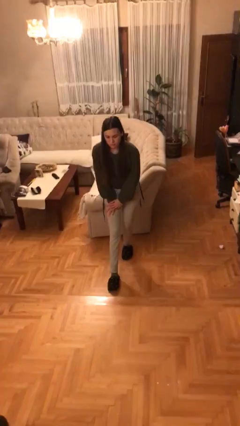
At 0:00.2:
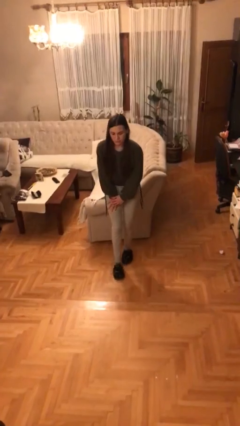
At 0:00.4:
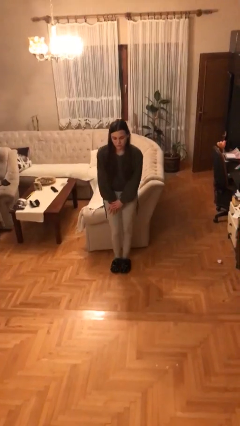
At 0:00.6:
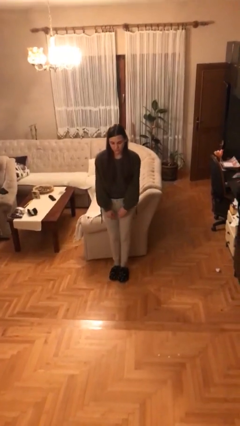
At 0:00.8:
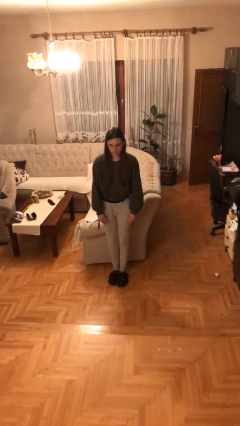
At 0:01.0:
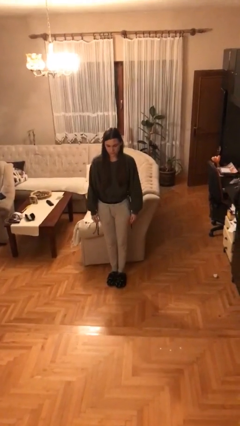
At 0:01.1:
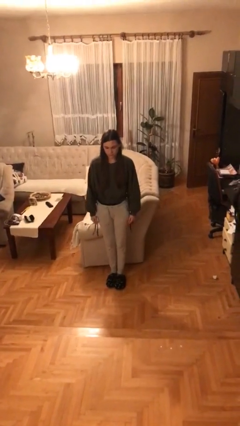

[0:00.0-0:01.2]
person stands up from floor

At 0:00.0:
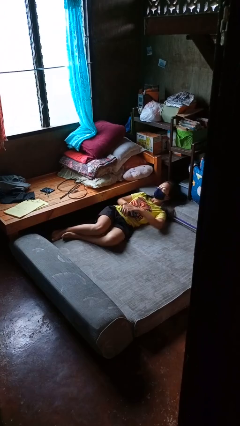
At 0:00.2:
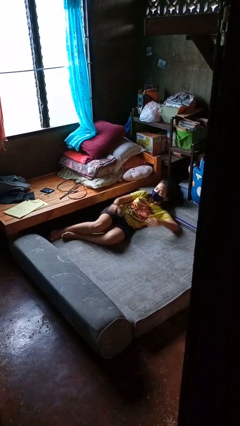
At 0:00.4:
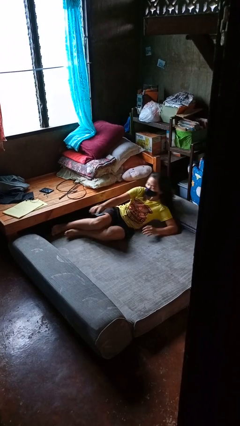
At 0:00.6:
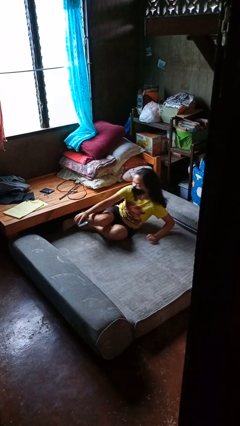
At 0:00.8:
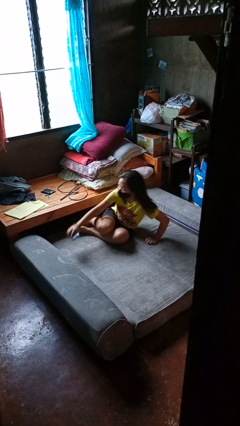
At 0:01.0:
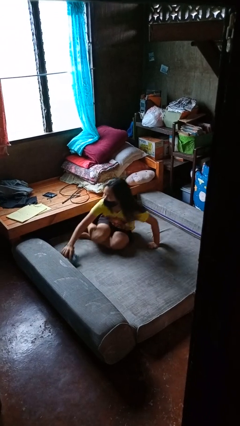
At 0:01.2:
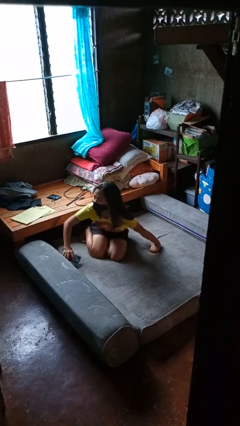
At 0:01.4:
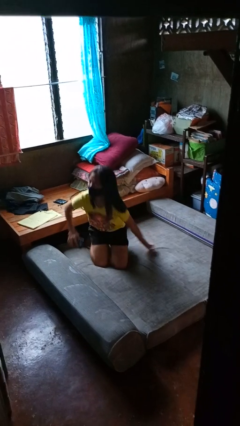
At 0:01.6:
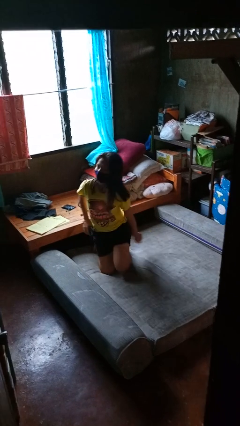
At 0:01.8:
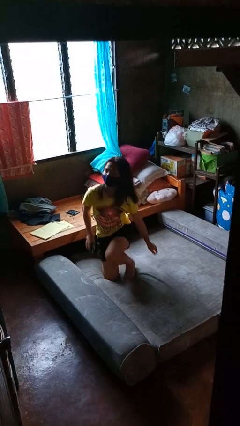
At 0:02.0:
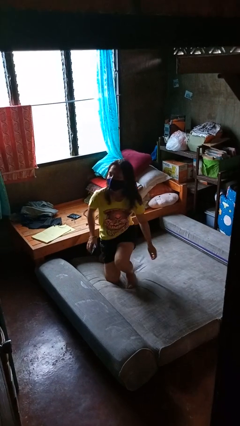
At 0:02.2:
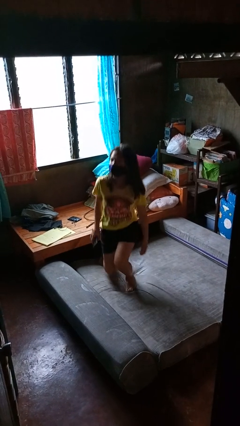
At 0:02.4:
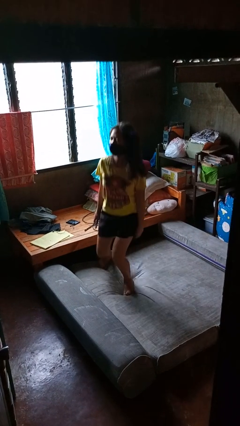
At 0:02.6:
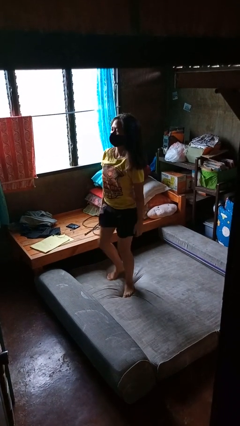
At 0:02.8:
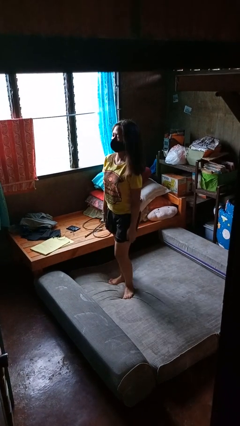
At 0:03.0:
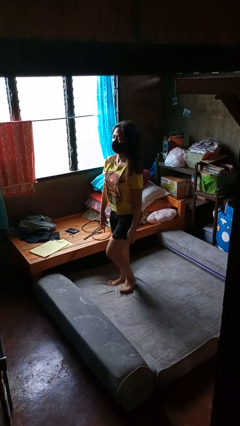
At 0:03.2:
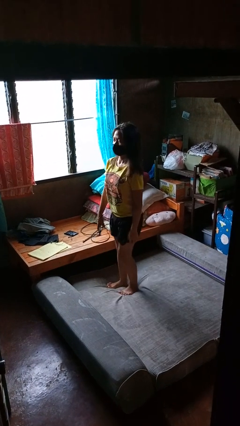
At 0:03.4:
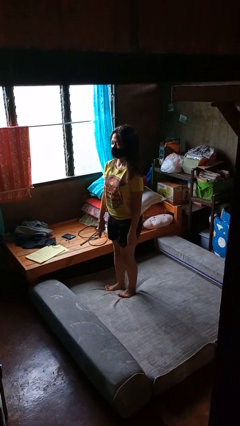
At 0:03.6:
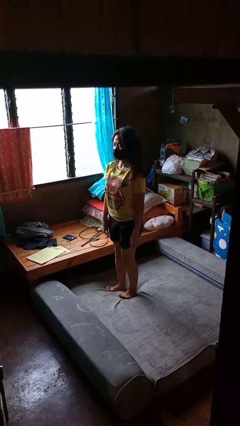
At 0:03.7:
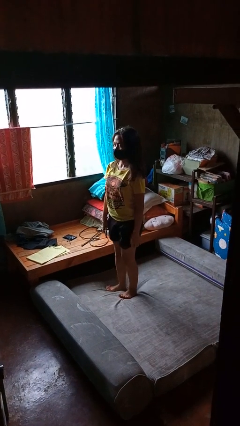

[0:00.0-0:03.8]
person stands up

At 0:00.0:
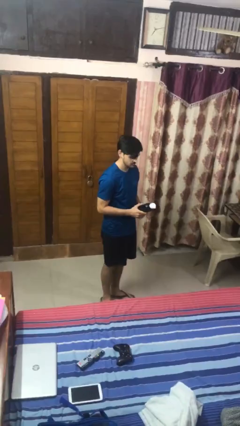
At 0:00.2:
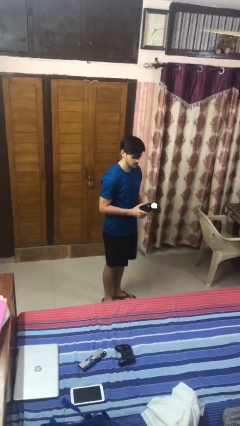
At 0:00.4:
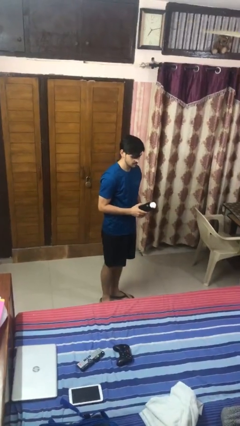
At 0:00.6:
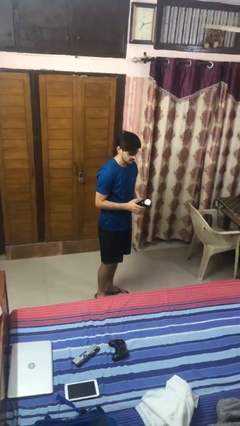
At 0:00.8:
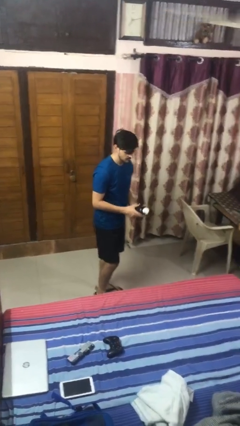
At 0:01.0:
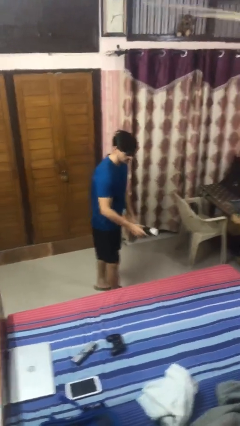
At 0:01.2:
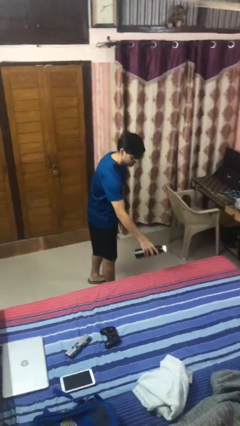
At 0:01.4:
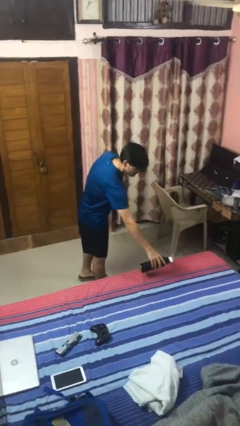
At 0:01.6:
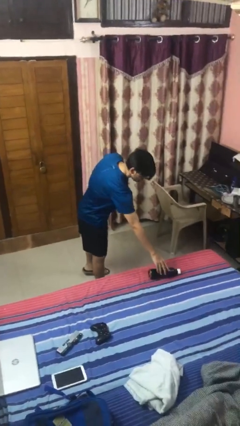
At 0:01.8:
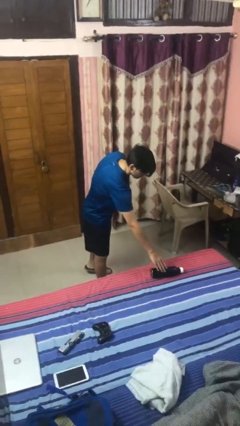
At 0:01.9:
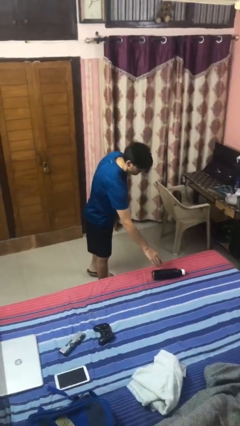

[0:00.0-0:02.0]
person puts down object on bed

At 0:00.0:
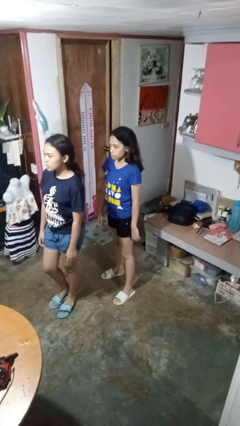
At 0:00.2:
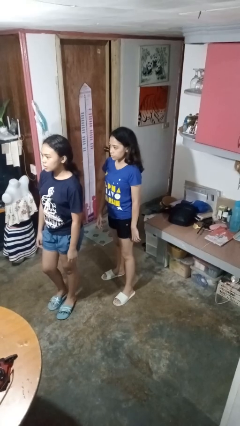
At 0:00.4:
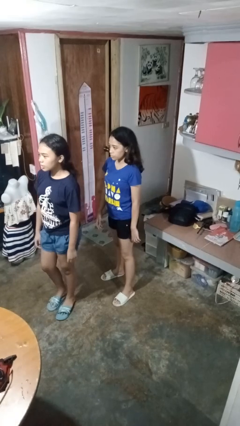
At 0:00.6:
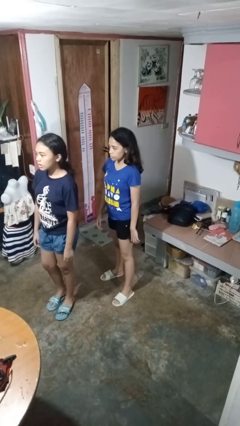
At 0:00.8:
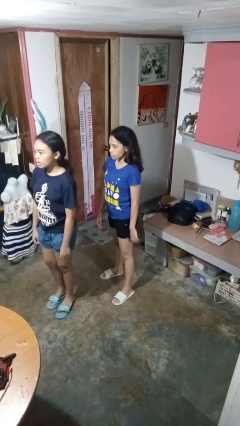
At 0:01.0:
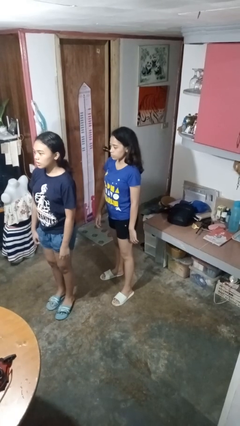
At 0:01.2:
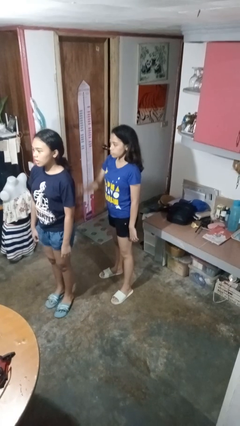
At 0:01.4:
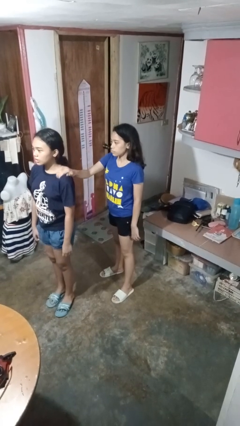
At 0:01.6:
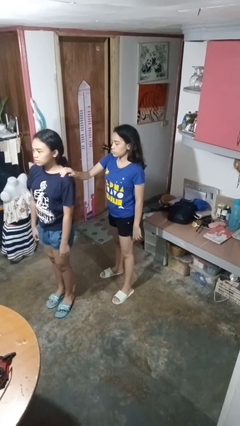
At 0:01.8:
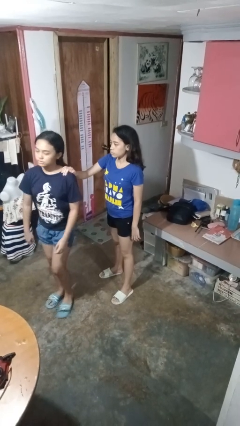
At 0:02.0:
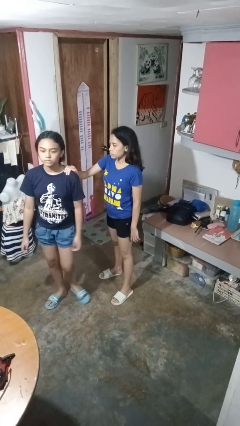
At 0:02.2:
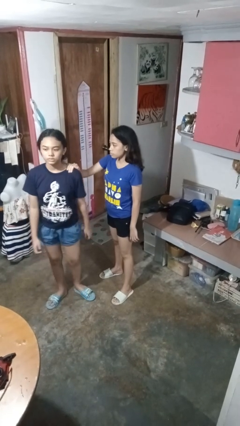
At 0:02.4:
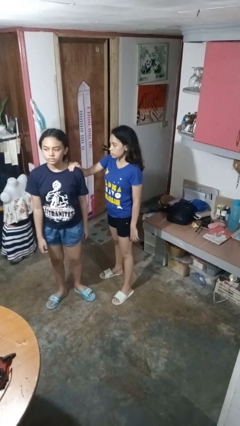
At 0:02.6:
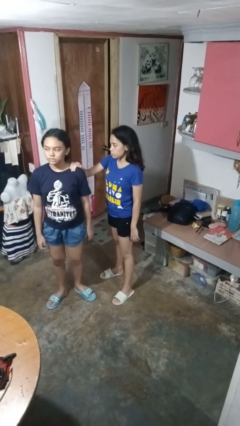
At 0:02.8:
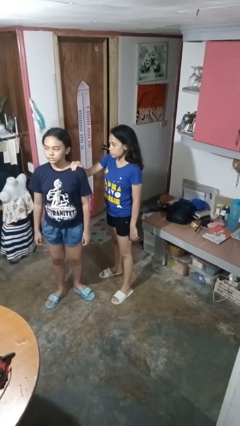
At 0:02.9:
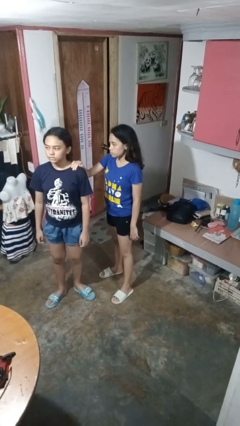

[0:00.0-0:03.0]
person grabs person by shoulder

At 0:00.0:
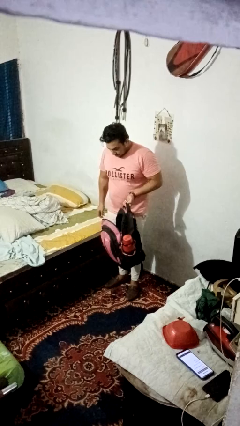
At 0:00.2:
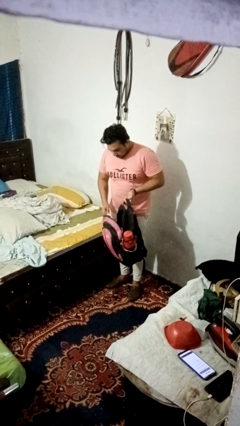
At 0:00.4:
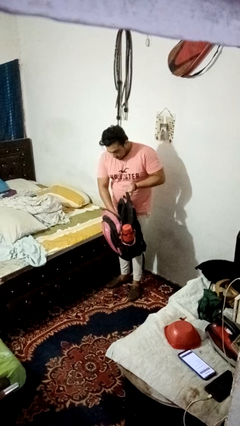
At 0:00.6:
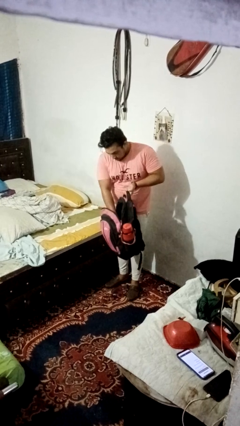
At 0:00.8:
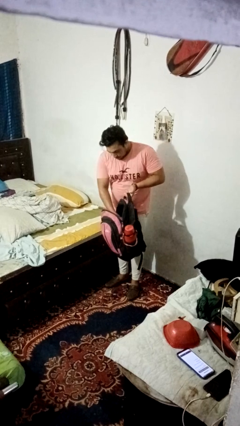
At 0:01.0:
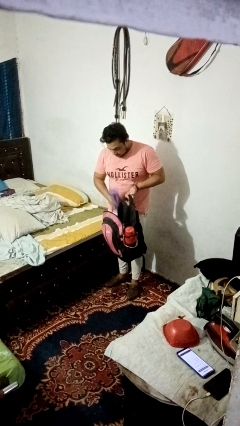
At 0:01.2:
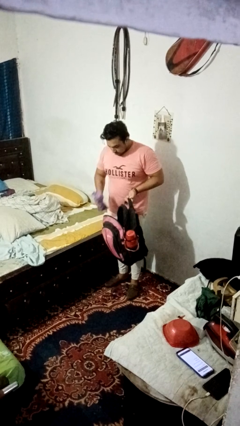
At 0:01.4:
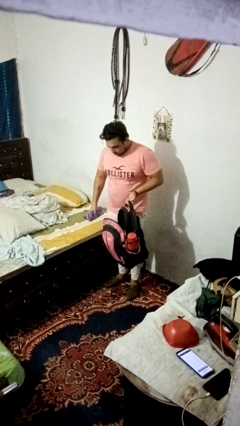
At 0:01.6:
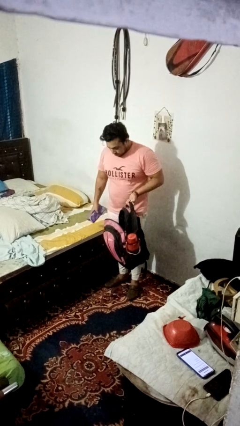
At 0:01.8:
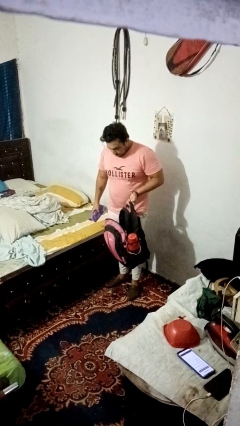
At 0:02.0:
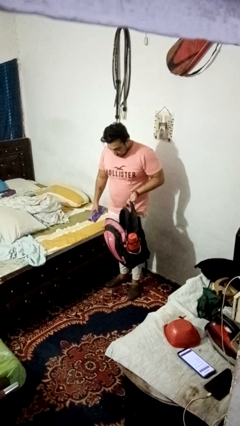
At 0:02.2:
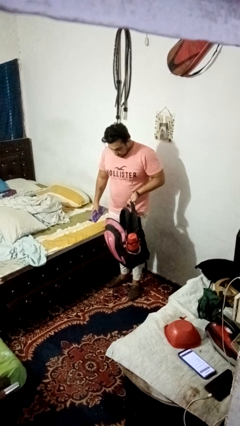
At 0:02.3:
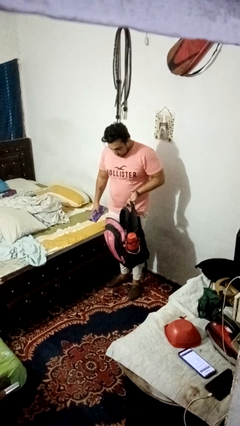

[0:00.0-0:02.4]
person takes object from bag

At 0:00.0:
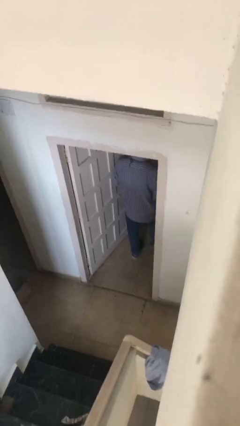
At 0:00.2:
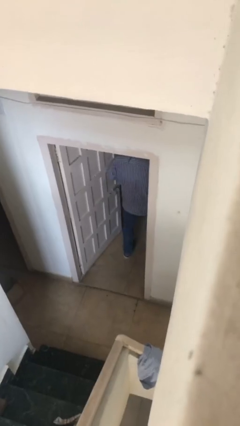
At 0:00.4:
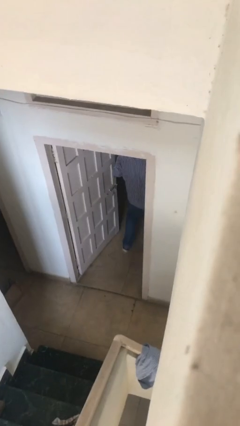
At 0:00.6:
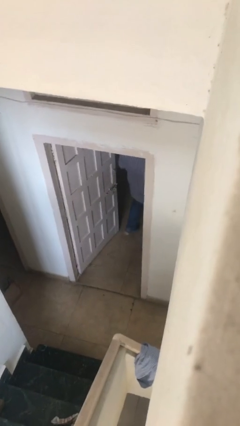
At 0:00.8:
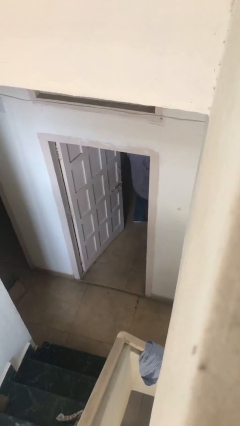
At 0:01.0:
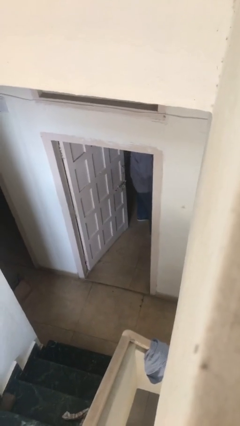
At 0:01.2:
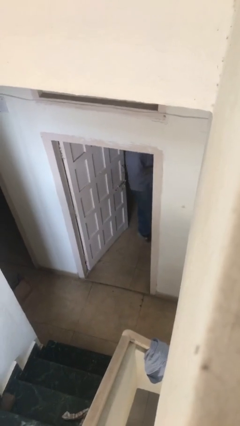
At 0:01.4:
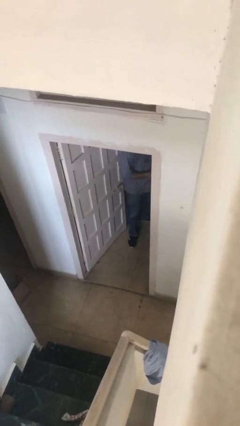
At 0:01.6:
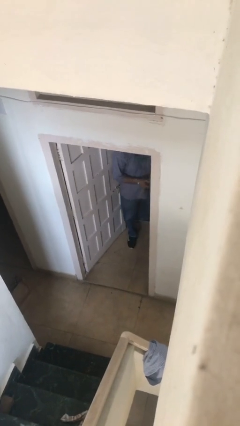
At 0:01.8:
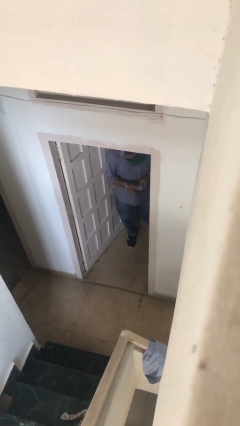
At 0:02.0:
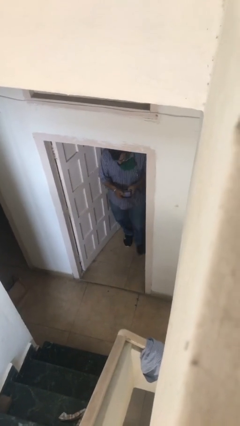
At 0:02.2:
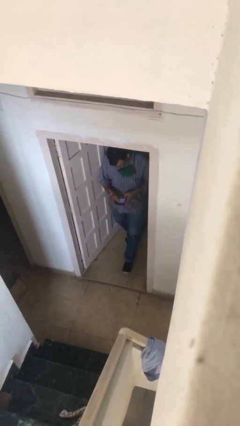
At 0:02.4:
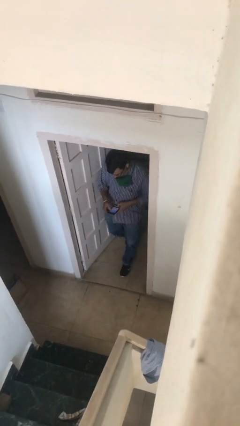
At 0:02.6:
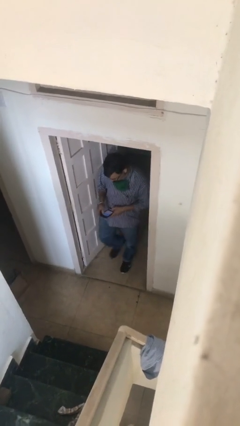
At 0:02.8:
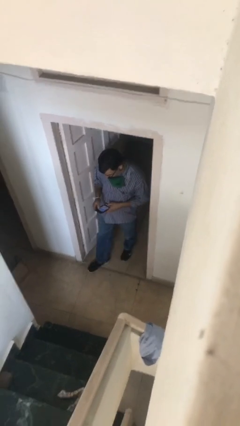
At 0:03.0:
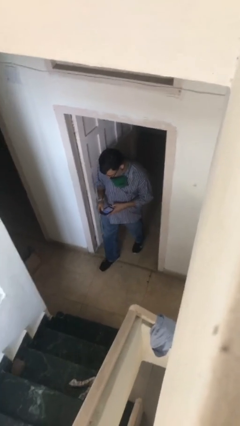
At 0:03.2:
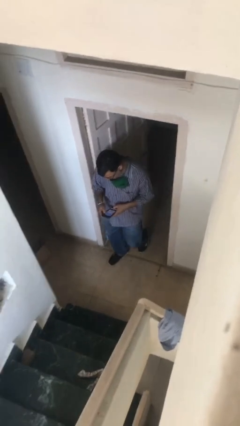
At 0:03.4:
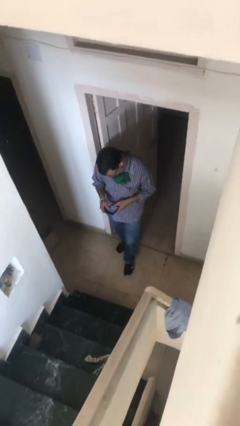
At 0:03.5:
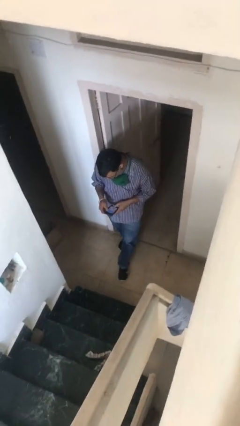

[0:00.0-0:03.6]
person enters scene through structure

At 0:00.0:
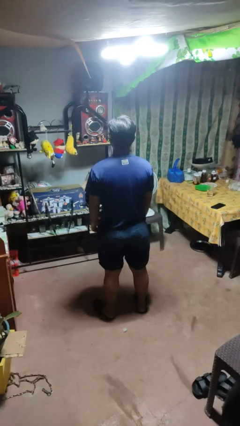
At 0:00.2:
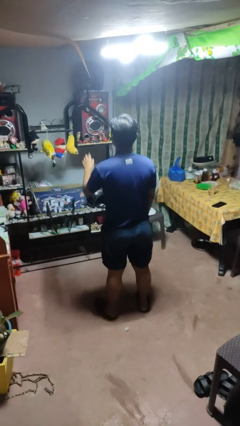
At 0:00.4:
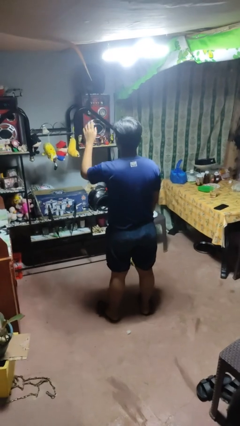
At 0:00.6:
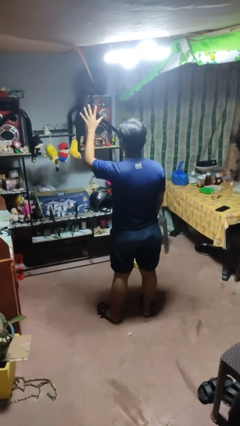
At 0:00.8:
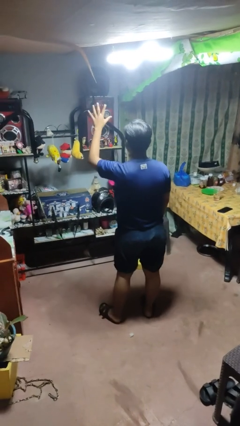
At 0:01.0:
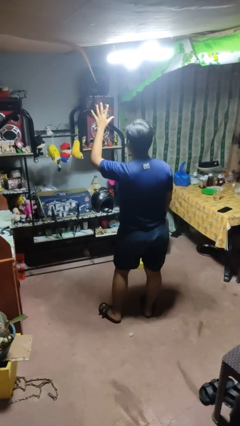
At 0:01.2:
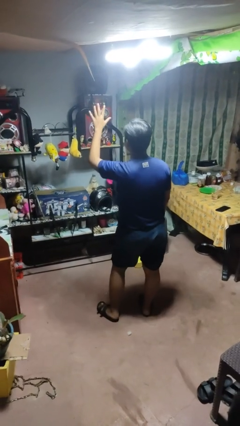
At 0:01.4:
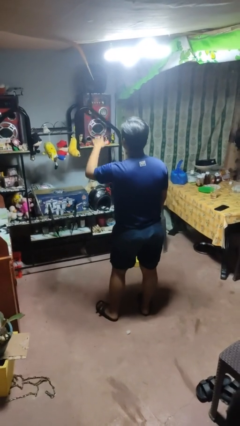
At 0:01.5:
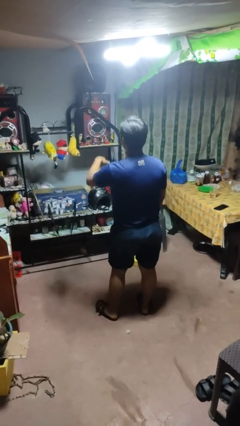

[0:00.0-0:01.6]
person gestures number five
